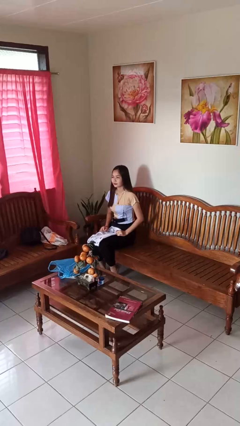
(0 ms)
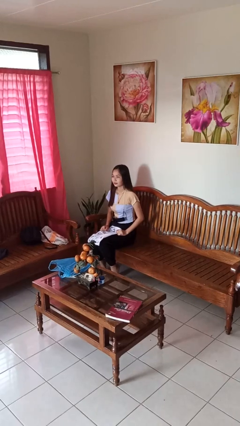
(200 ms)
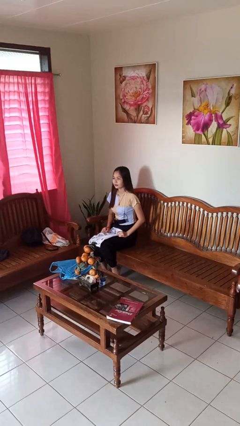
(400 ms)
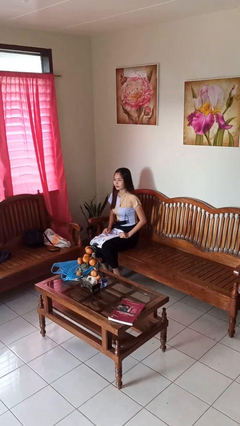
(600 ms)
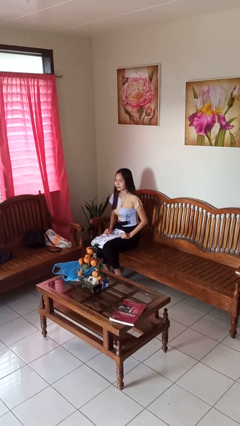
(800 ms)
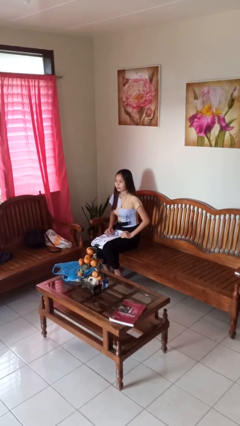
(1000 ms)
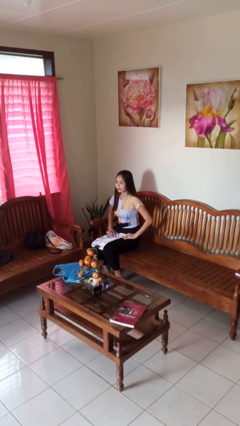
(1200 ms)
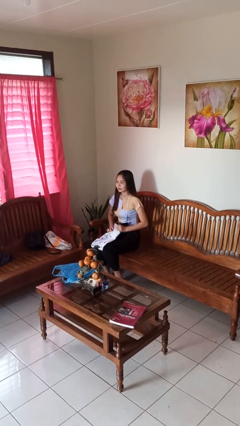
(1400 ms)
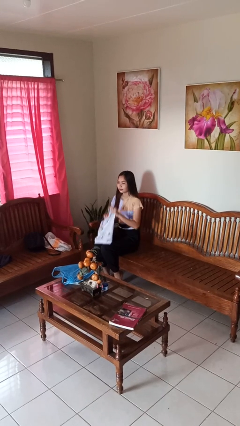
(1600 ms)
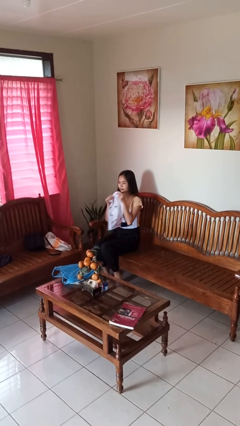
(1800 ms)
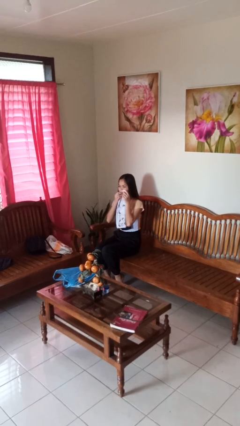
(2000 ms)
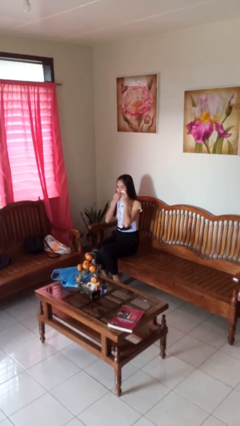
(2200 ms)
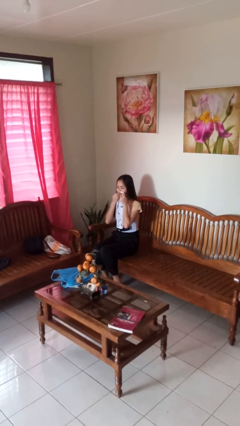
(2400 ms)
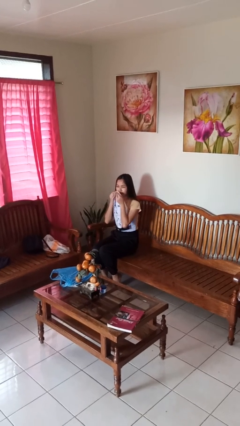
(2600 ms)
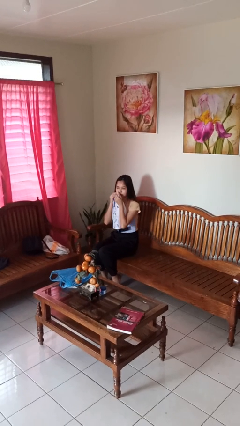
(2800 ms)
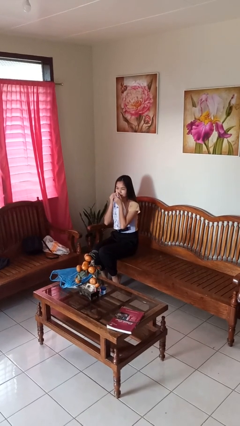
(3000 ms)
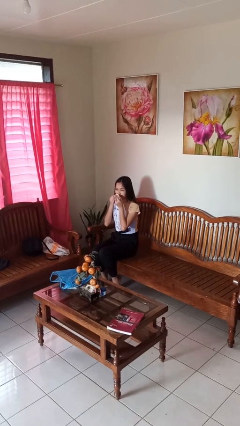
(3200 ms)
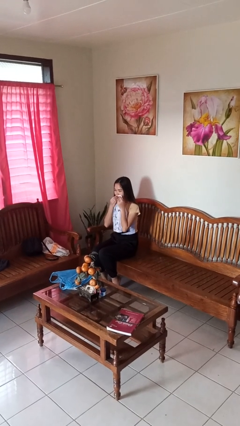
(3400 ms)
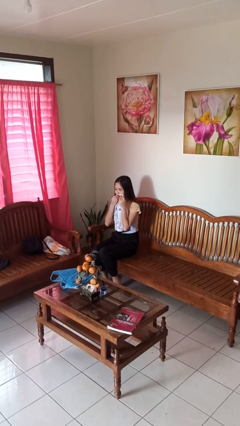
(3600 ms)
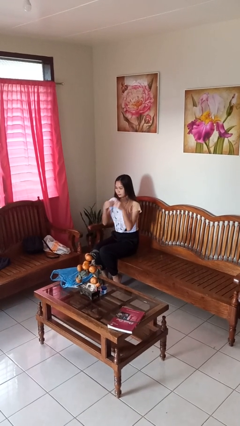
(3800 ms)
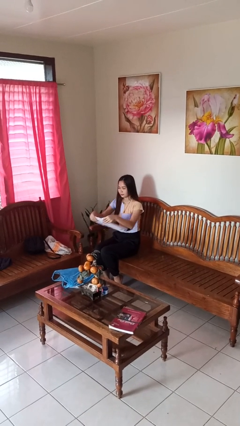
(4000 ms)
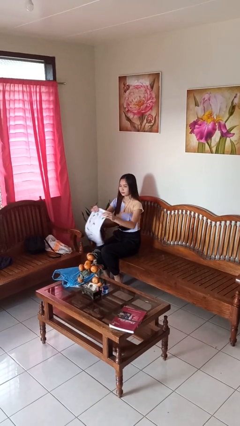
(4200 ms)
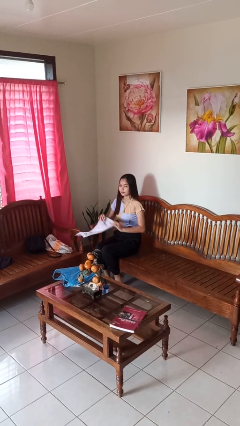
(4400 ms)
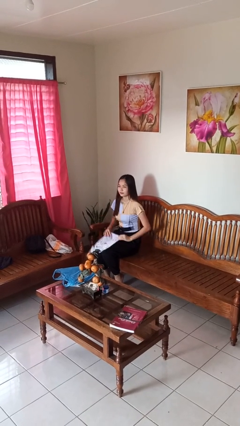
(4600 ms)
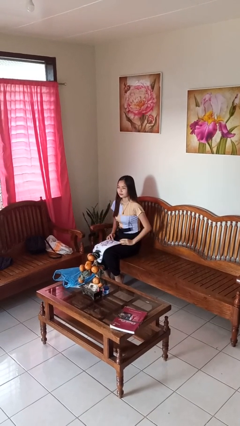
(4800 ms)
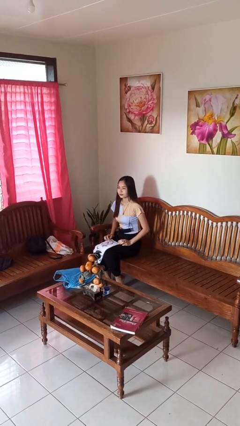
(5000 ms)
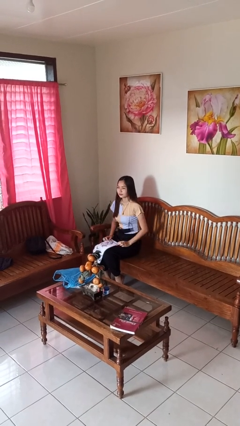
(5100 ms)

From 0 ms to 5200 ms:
person wipes mouth with napkin

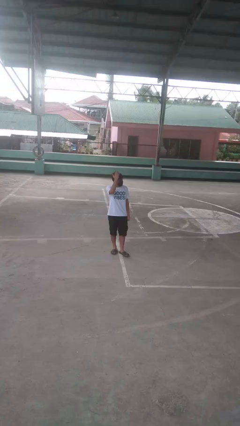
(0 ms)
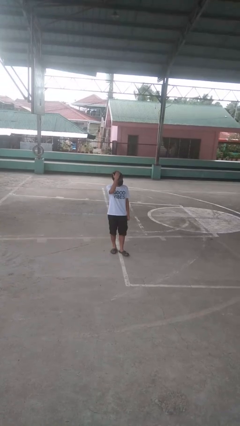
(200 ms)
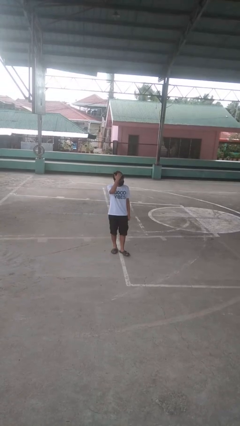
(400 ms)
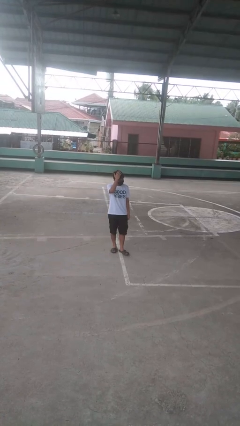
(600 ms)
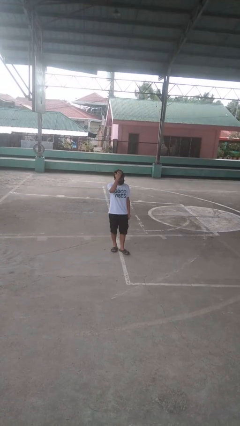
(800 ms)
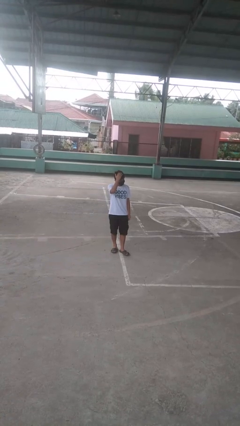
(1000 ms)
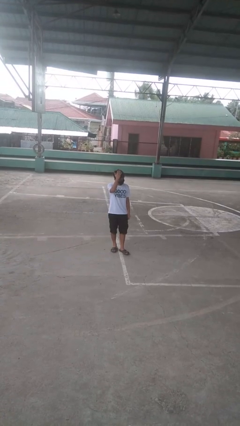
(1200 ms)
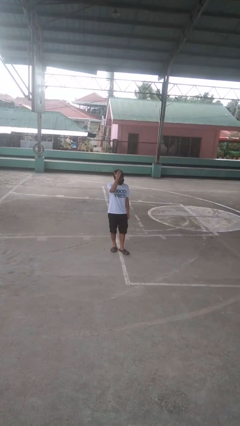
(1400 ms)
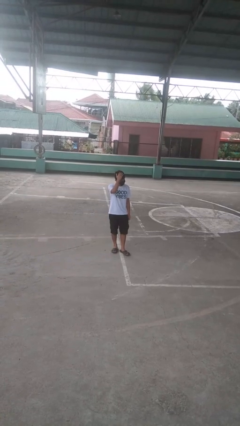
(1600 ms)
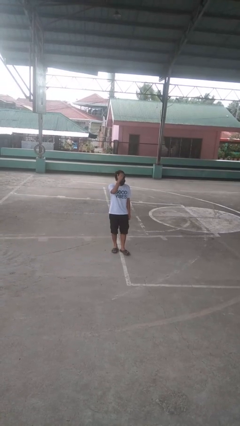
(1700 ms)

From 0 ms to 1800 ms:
person pats head

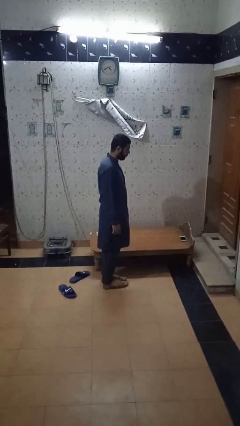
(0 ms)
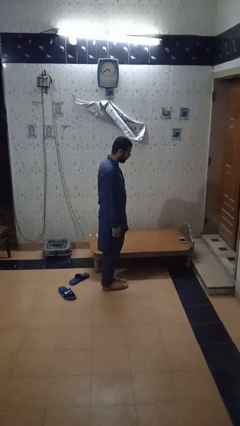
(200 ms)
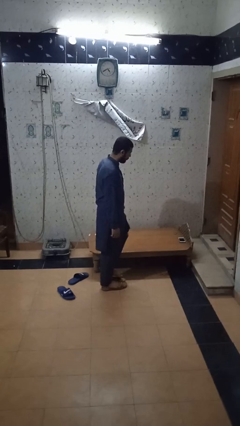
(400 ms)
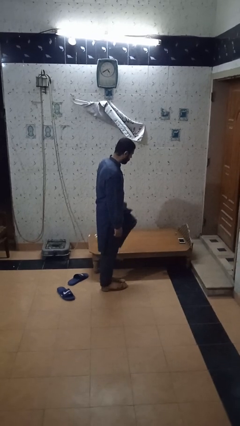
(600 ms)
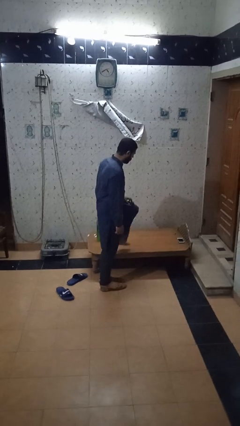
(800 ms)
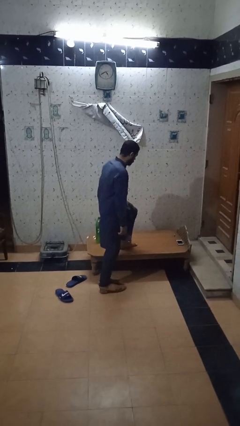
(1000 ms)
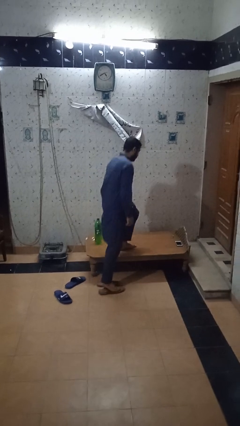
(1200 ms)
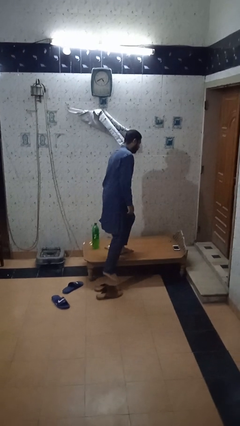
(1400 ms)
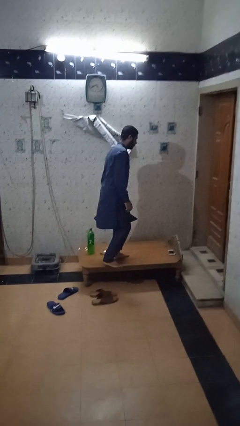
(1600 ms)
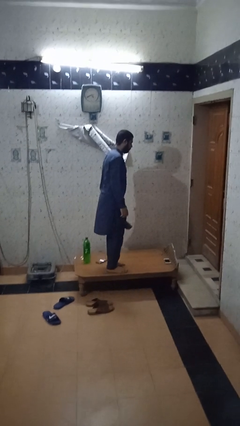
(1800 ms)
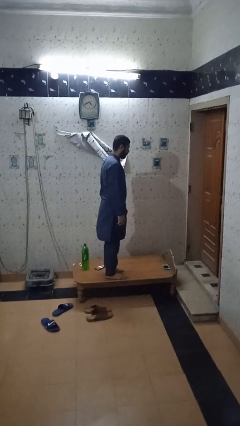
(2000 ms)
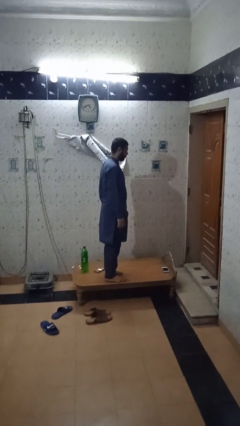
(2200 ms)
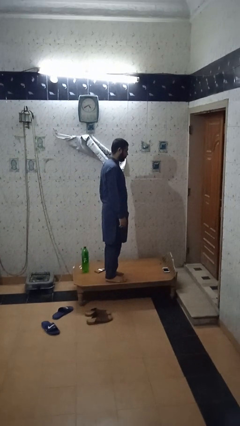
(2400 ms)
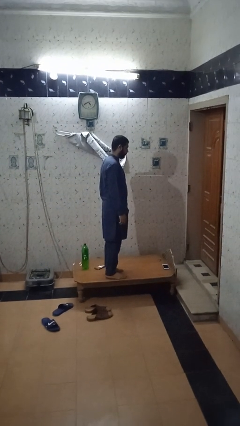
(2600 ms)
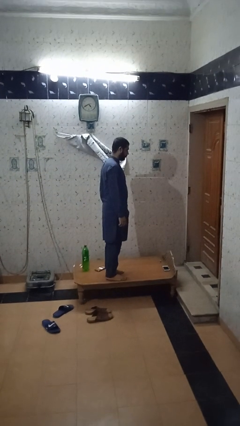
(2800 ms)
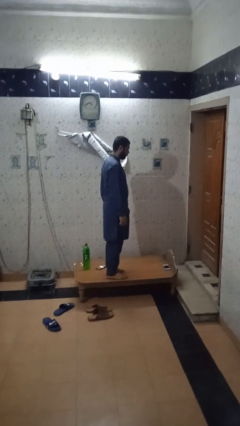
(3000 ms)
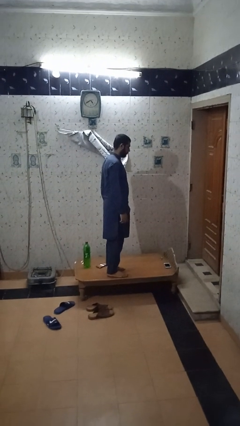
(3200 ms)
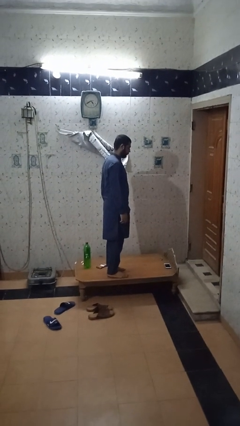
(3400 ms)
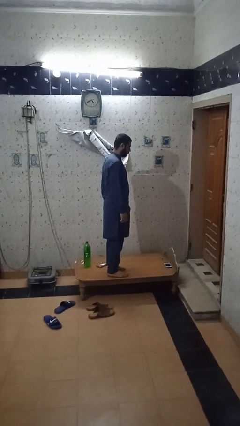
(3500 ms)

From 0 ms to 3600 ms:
person climbs on table

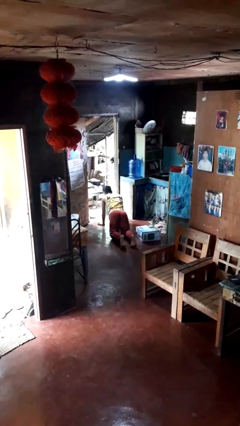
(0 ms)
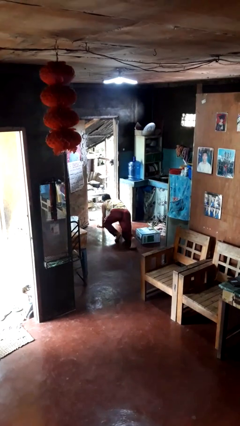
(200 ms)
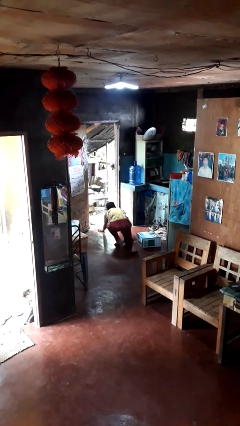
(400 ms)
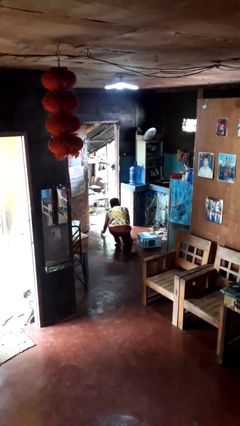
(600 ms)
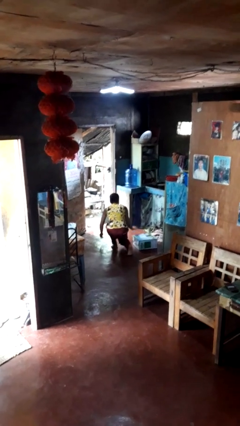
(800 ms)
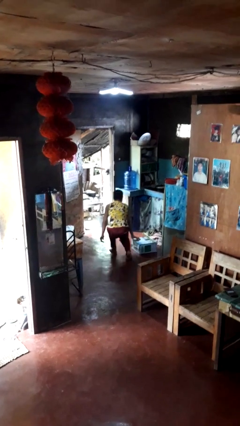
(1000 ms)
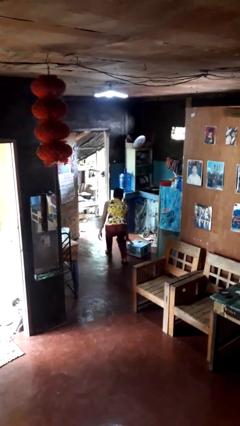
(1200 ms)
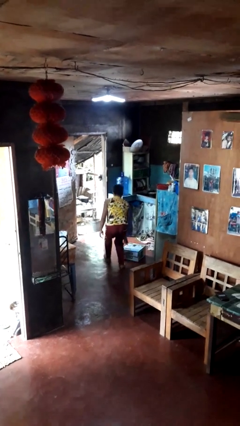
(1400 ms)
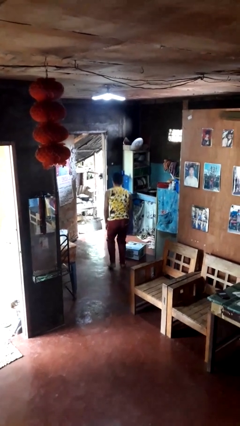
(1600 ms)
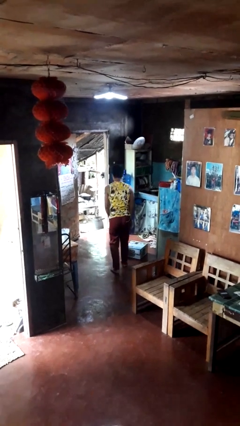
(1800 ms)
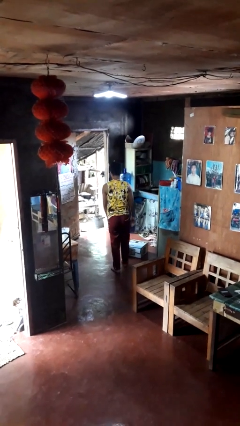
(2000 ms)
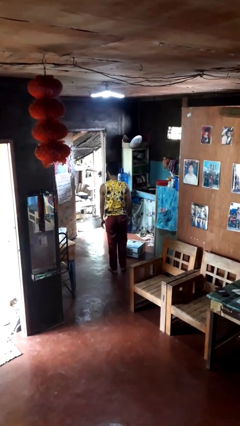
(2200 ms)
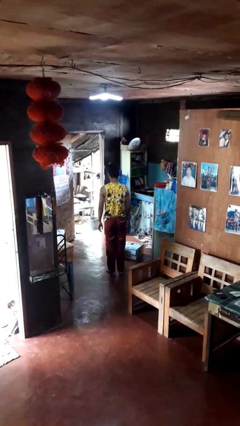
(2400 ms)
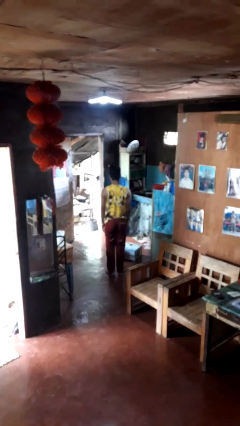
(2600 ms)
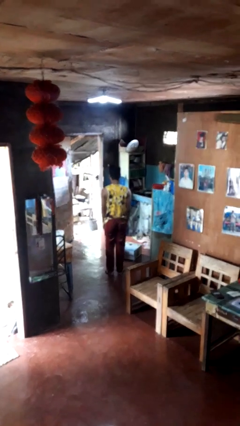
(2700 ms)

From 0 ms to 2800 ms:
person stands up from floor

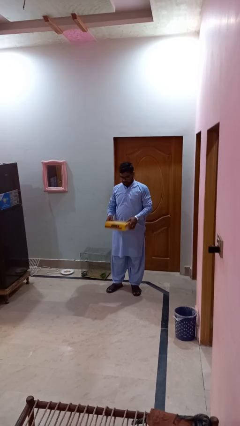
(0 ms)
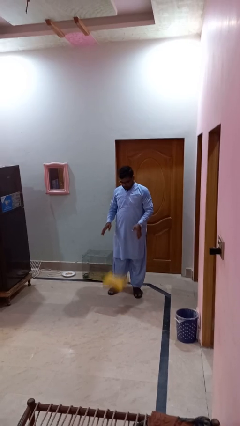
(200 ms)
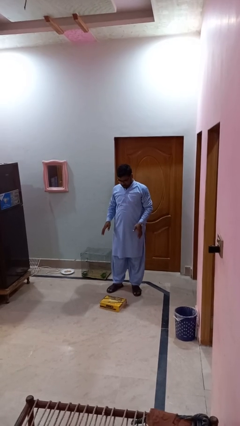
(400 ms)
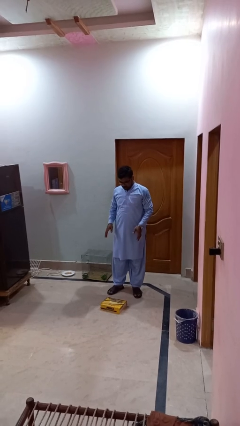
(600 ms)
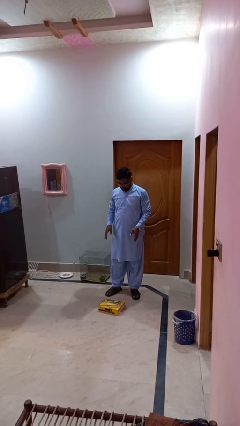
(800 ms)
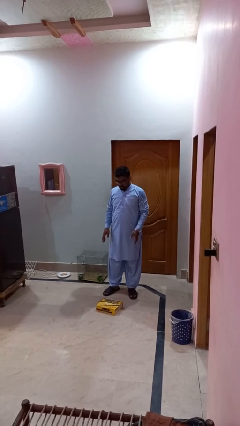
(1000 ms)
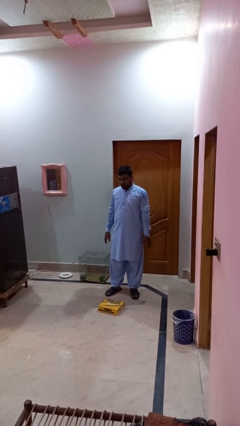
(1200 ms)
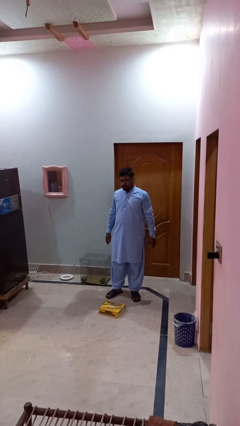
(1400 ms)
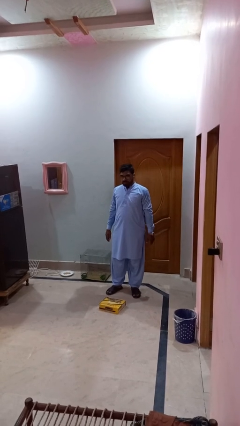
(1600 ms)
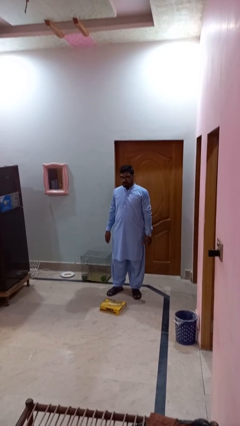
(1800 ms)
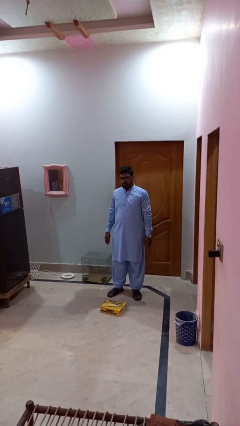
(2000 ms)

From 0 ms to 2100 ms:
person drops object

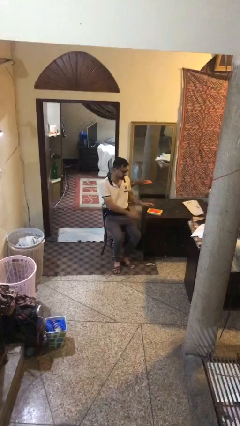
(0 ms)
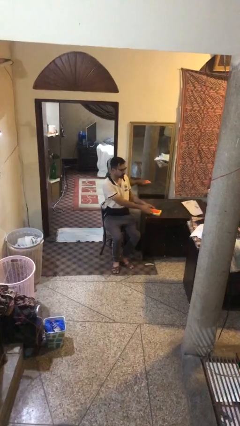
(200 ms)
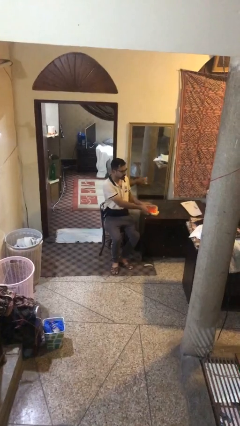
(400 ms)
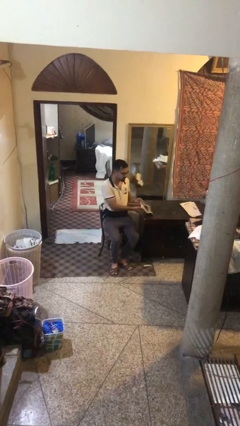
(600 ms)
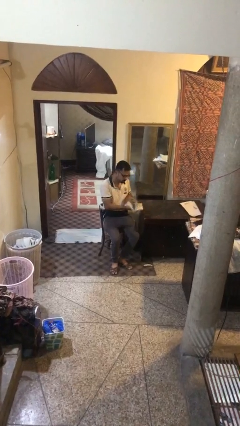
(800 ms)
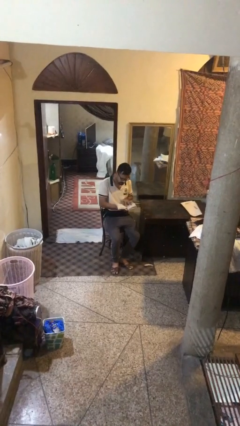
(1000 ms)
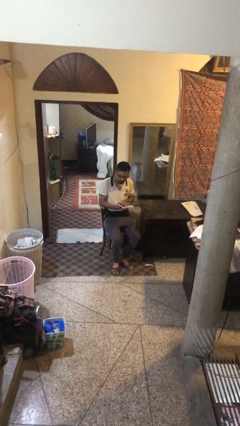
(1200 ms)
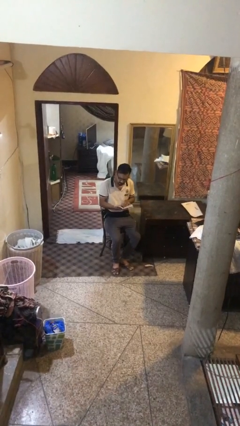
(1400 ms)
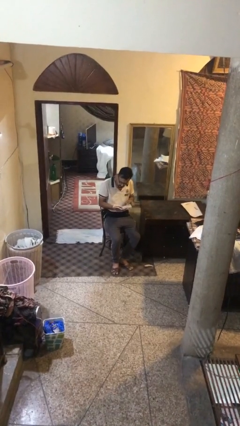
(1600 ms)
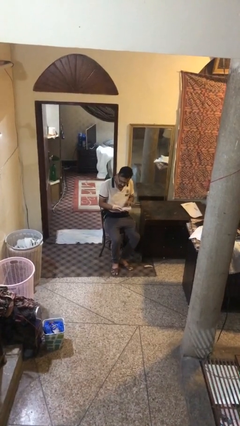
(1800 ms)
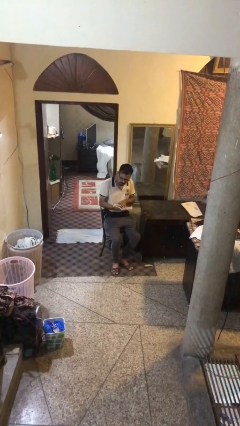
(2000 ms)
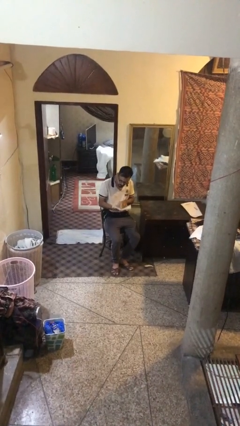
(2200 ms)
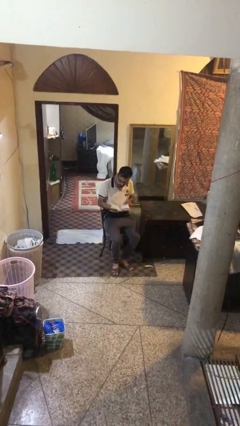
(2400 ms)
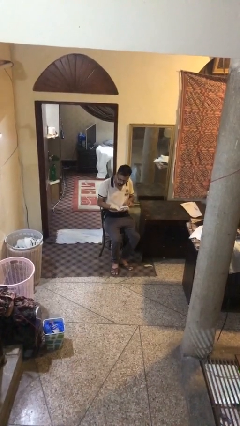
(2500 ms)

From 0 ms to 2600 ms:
person reads document
